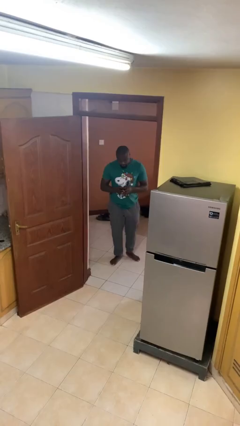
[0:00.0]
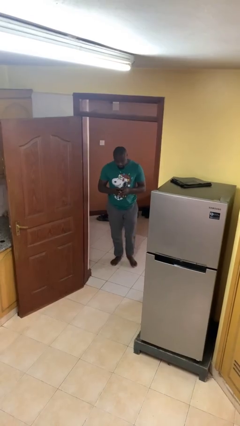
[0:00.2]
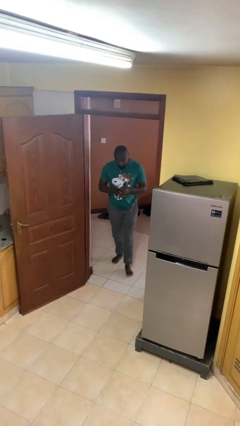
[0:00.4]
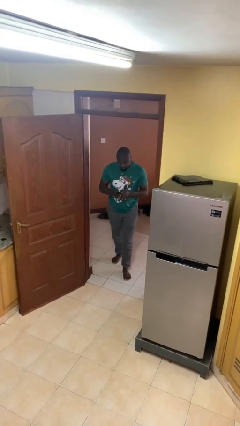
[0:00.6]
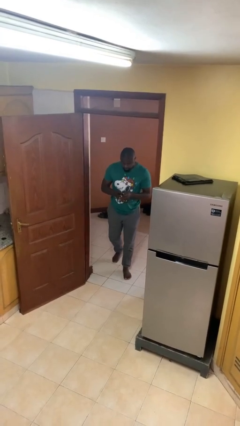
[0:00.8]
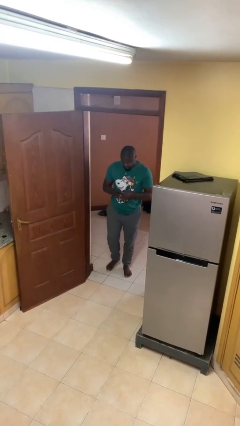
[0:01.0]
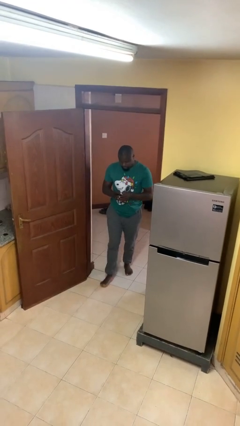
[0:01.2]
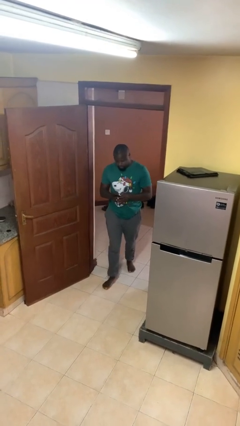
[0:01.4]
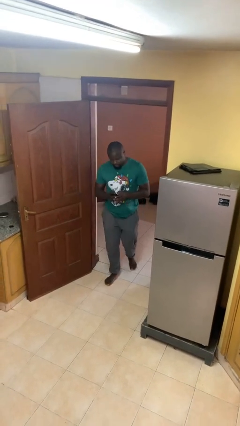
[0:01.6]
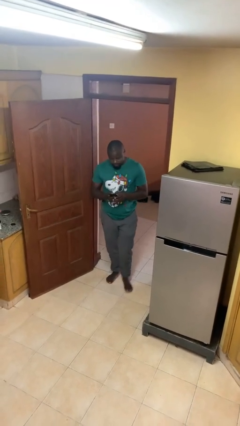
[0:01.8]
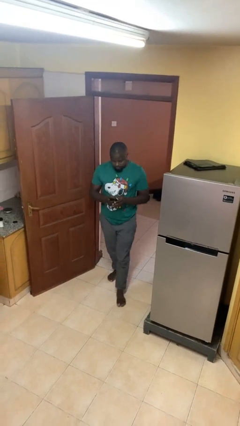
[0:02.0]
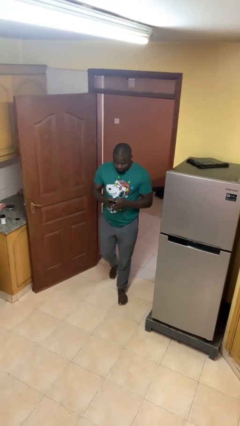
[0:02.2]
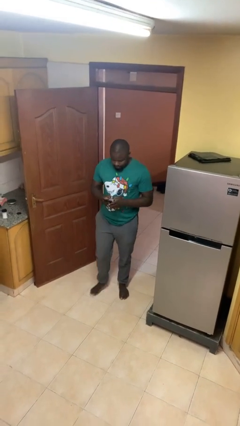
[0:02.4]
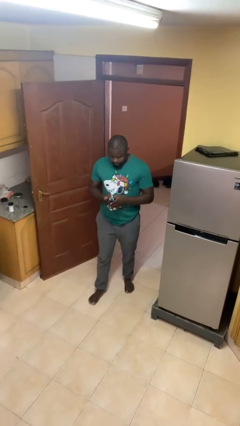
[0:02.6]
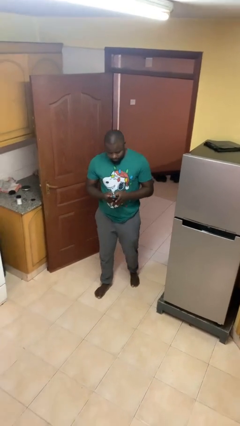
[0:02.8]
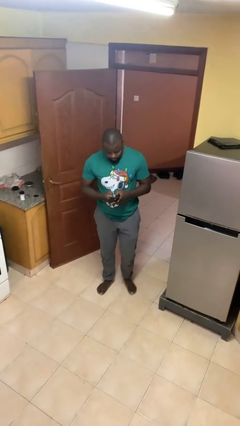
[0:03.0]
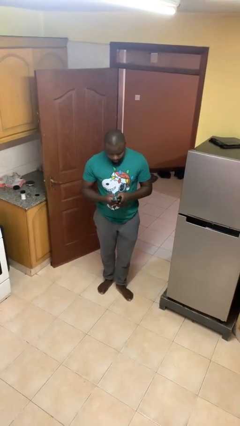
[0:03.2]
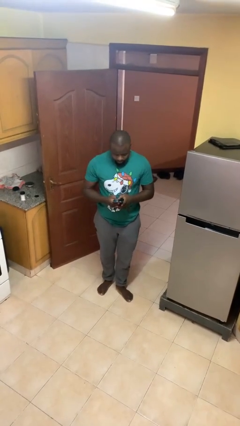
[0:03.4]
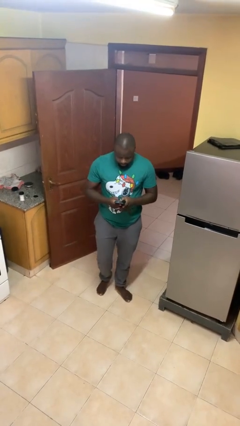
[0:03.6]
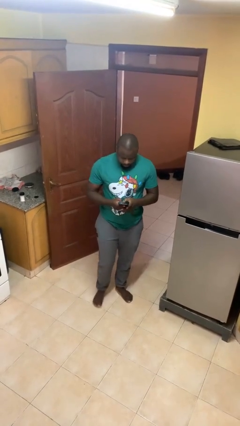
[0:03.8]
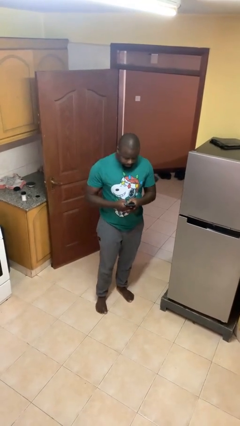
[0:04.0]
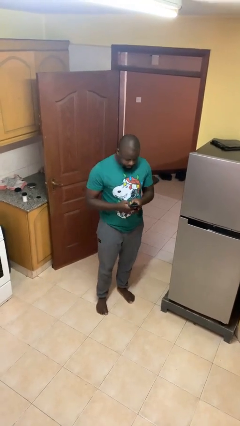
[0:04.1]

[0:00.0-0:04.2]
person enters scene through structure

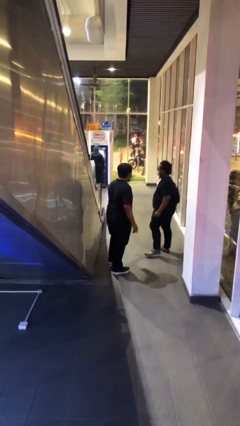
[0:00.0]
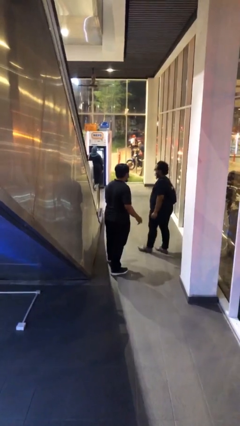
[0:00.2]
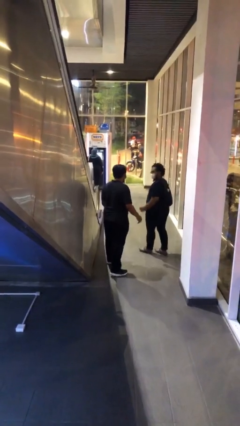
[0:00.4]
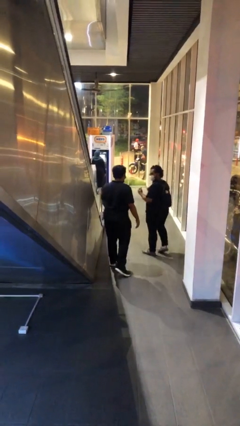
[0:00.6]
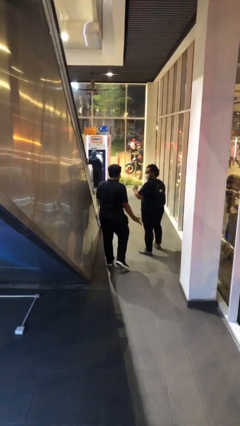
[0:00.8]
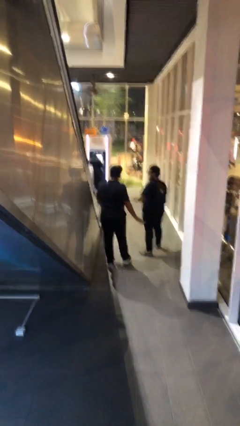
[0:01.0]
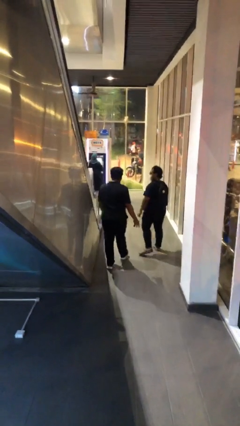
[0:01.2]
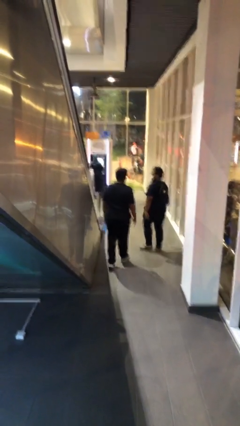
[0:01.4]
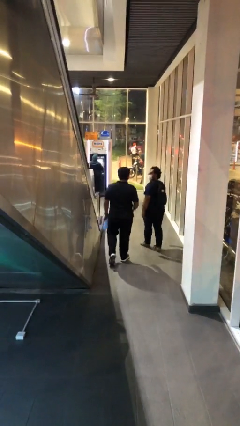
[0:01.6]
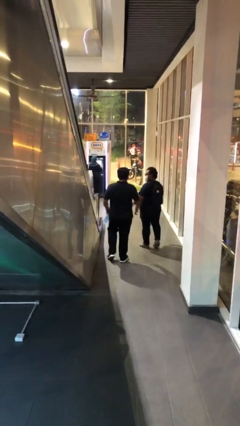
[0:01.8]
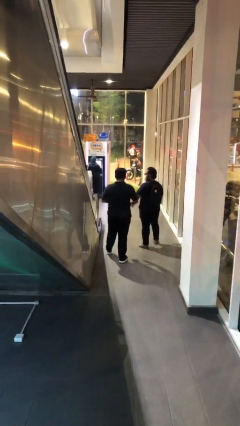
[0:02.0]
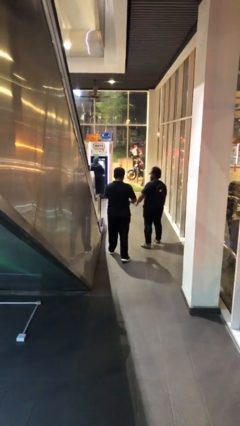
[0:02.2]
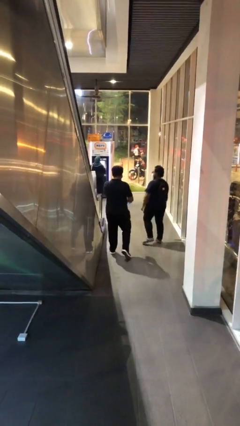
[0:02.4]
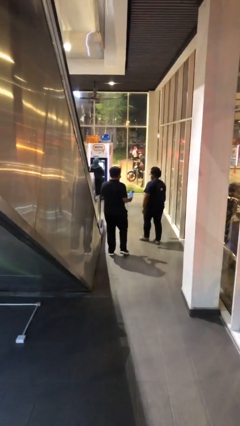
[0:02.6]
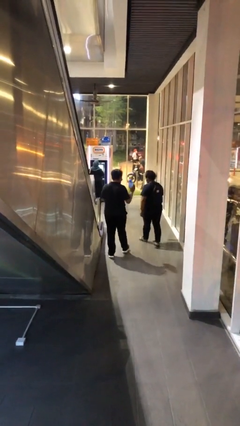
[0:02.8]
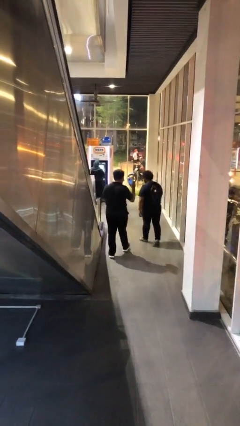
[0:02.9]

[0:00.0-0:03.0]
person talks to person

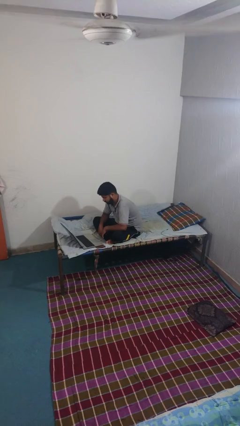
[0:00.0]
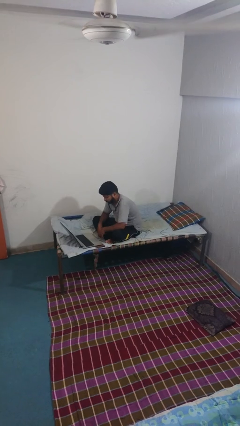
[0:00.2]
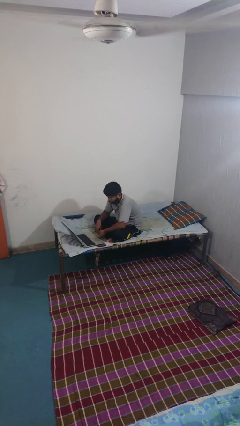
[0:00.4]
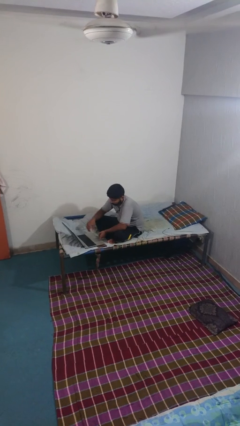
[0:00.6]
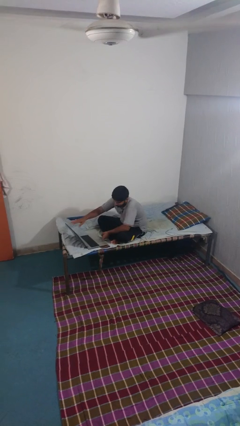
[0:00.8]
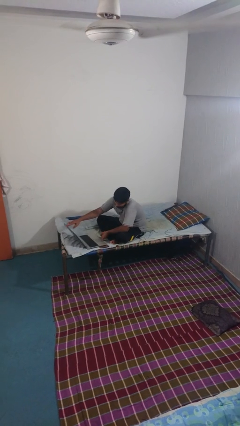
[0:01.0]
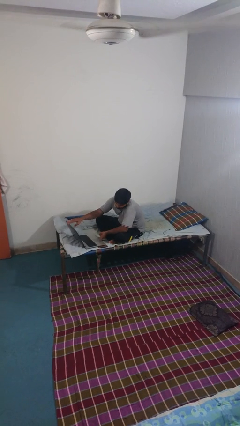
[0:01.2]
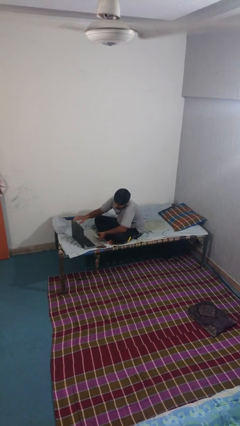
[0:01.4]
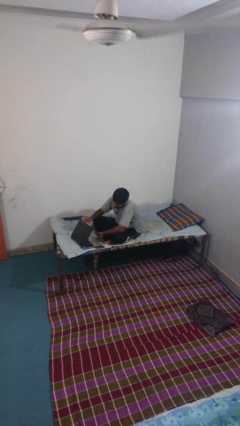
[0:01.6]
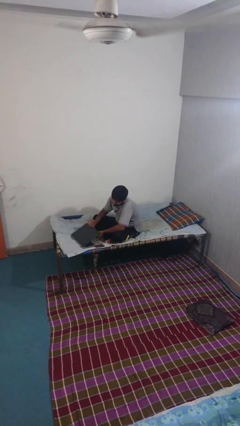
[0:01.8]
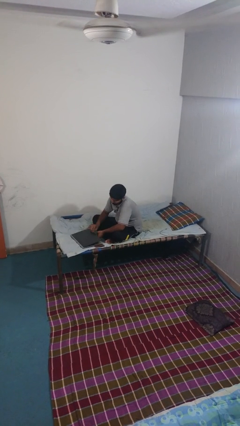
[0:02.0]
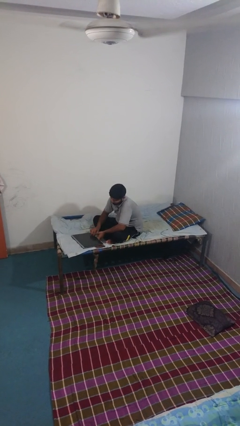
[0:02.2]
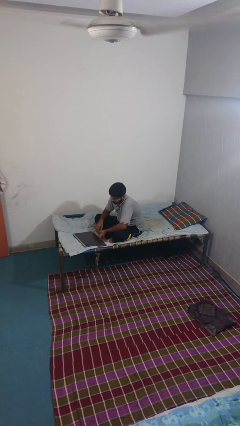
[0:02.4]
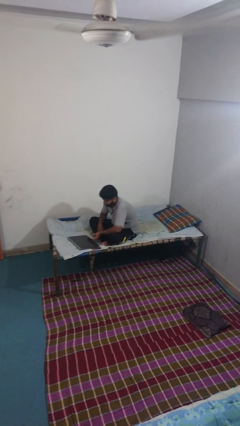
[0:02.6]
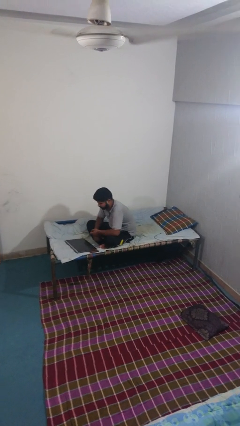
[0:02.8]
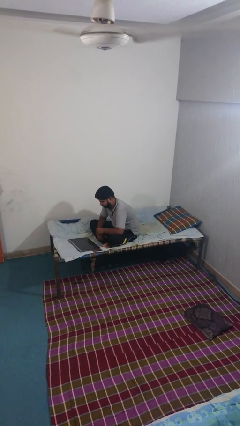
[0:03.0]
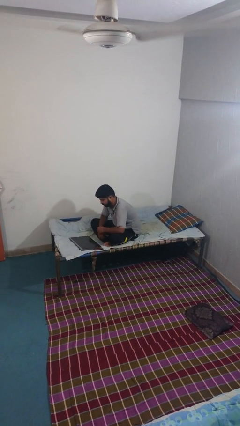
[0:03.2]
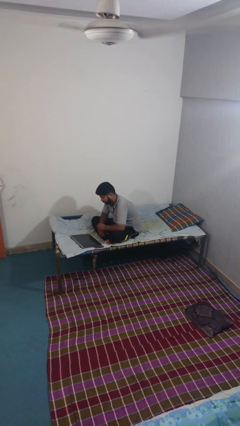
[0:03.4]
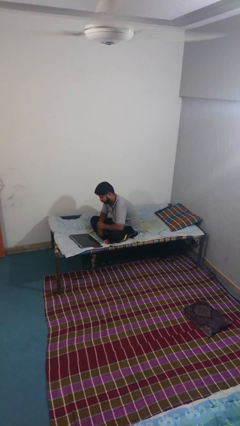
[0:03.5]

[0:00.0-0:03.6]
person closes laptop

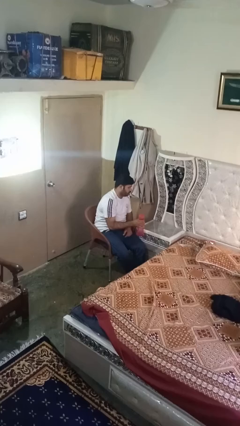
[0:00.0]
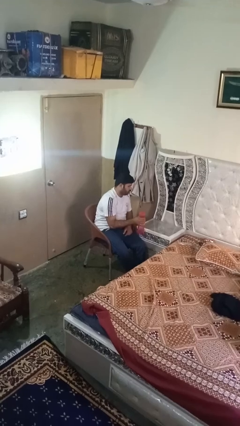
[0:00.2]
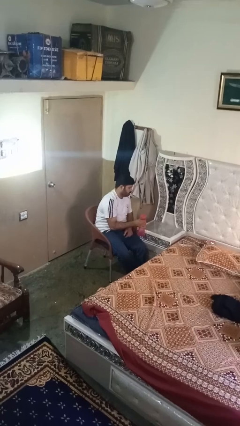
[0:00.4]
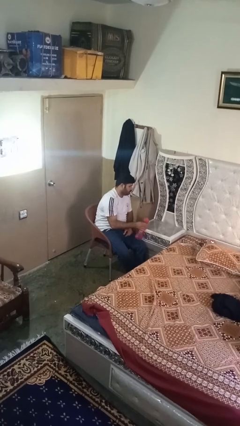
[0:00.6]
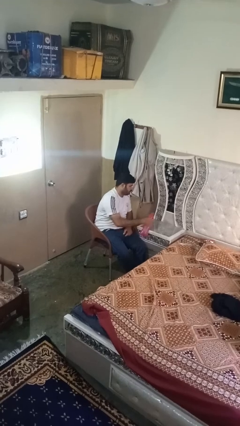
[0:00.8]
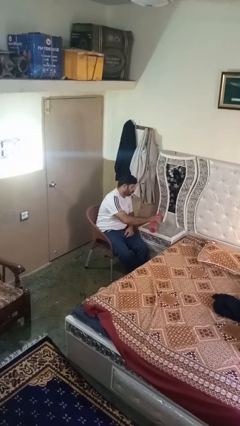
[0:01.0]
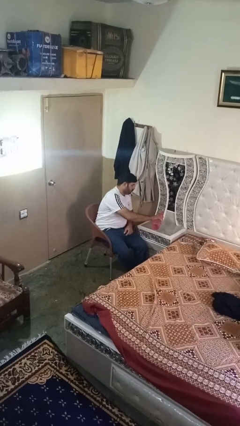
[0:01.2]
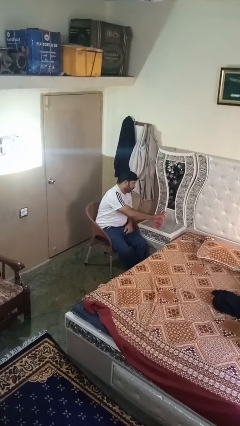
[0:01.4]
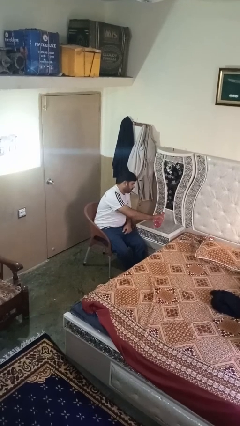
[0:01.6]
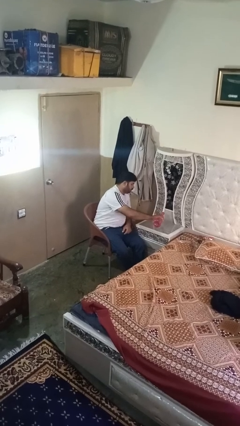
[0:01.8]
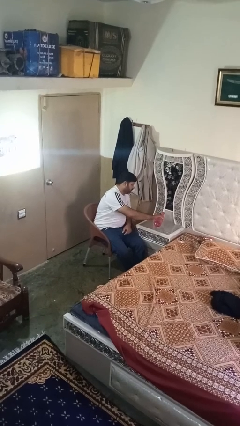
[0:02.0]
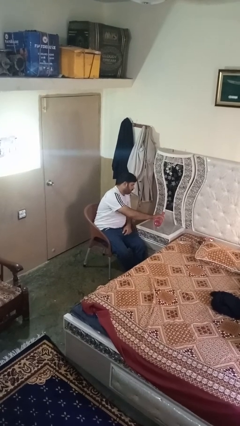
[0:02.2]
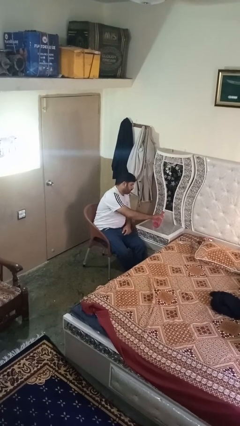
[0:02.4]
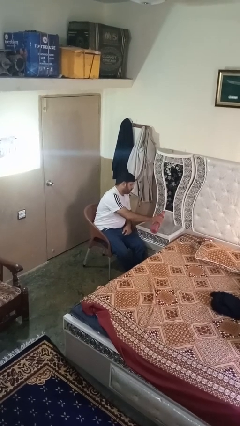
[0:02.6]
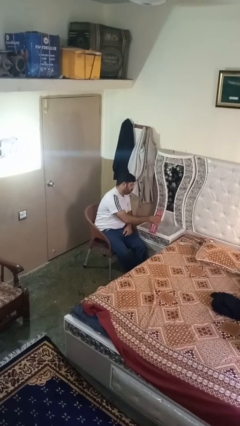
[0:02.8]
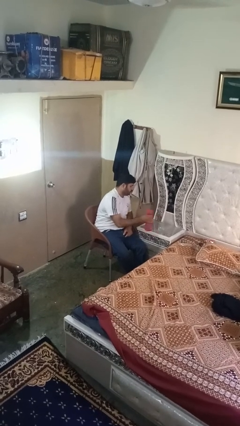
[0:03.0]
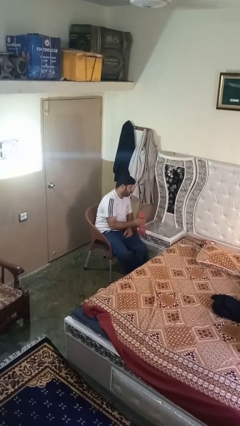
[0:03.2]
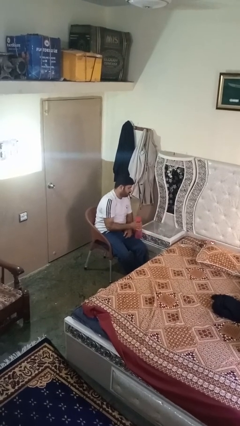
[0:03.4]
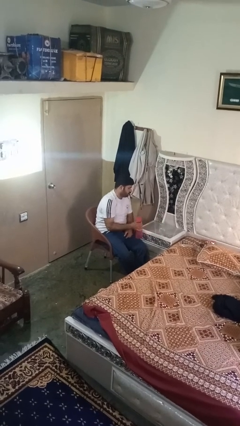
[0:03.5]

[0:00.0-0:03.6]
person pours liquid into cup

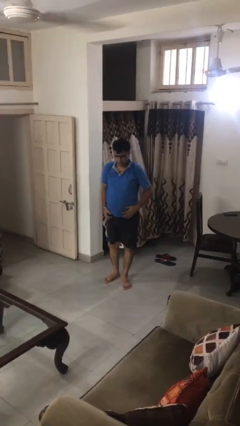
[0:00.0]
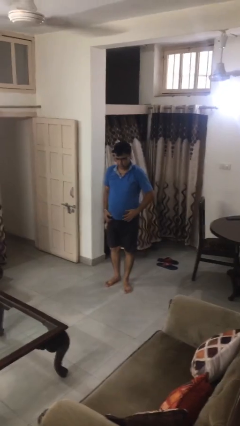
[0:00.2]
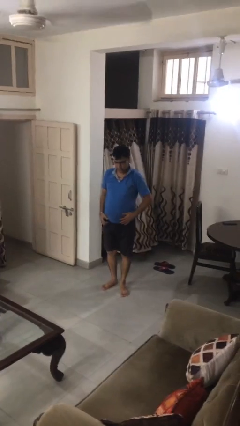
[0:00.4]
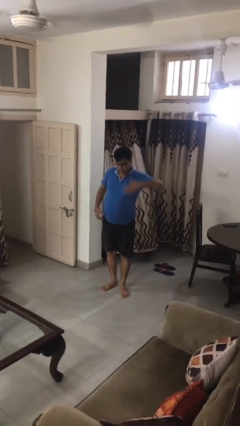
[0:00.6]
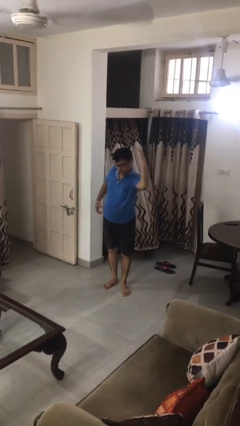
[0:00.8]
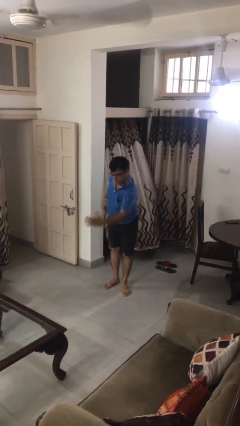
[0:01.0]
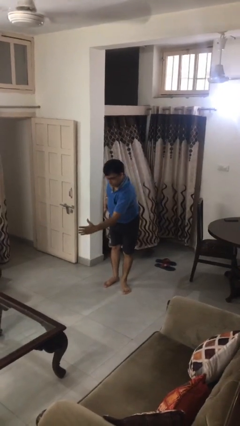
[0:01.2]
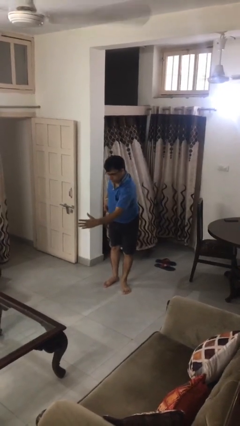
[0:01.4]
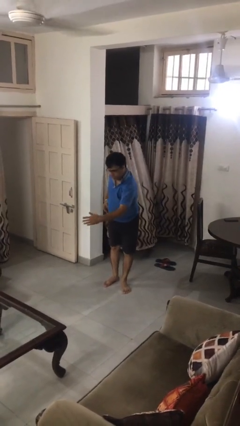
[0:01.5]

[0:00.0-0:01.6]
person karate chop

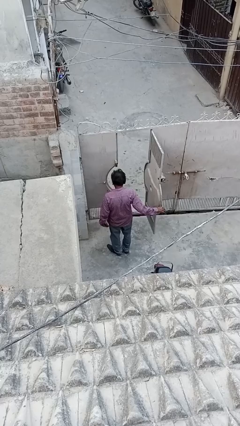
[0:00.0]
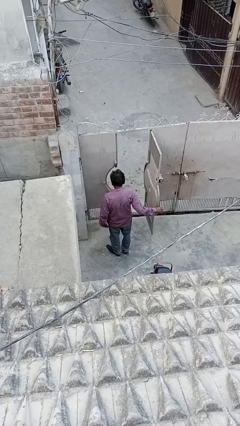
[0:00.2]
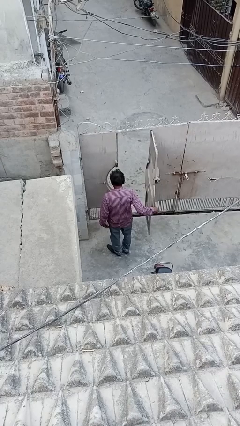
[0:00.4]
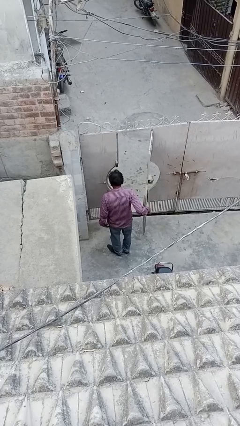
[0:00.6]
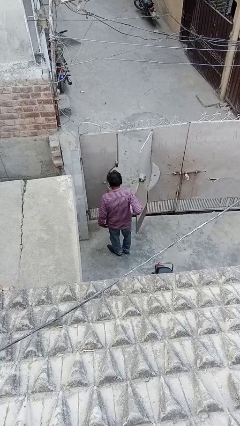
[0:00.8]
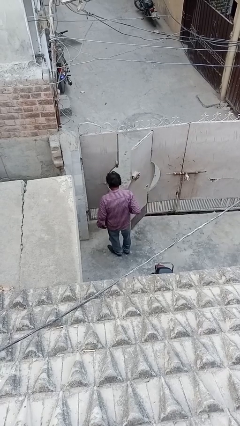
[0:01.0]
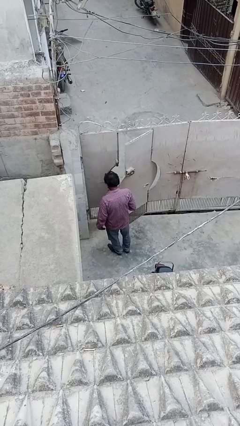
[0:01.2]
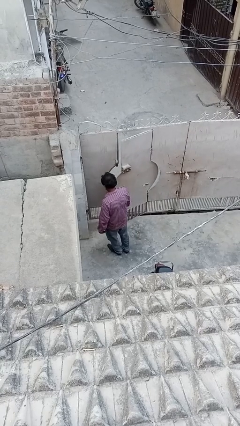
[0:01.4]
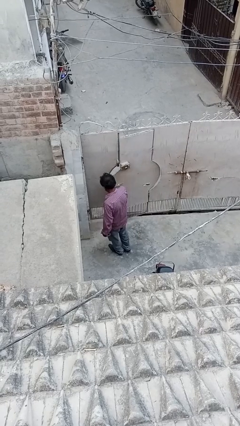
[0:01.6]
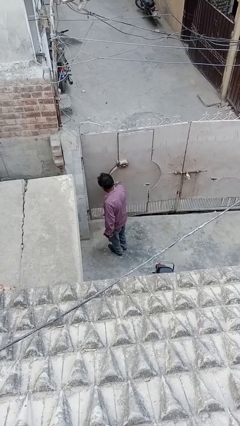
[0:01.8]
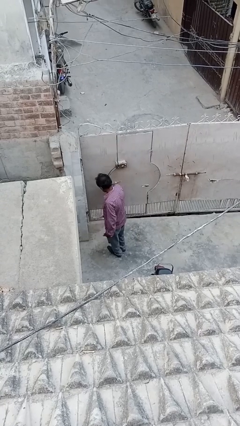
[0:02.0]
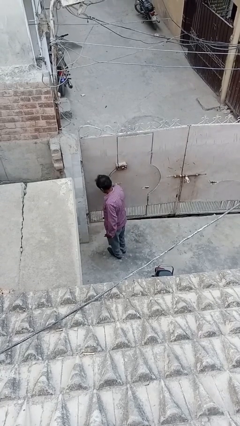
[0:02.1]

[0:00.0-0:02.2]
person closes facility door
